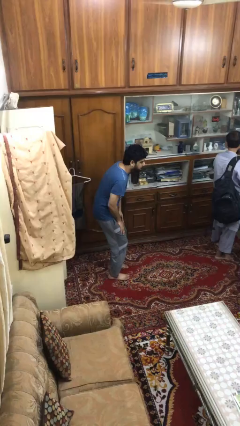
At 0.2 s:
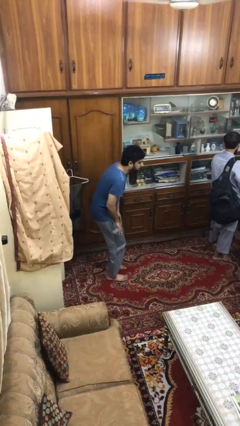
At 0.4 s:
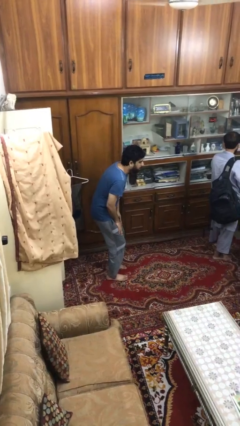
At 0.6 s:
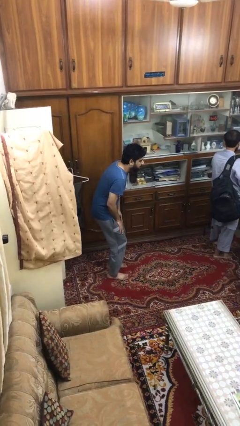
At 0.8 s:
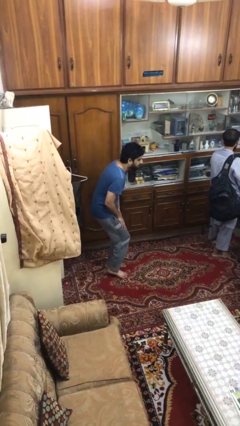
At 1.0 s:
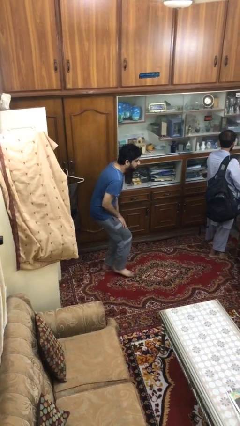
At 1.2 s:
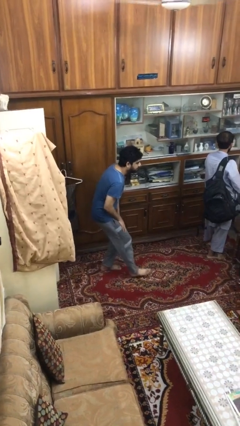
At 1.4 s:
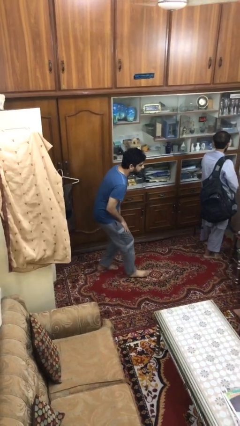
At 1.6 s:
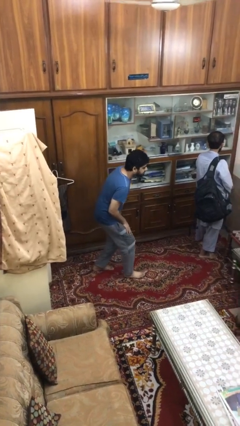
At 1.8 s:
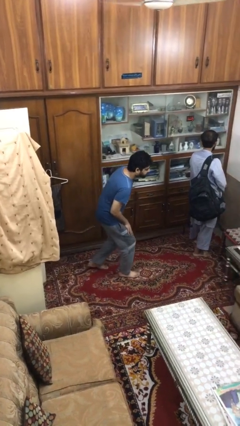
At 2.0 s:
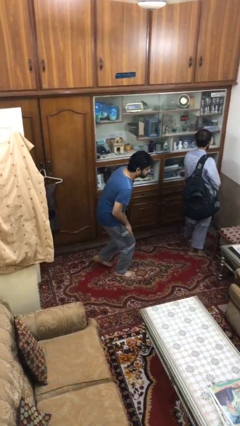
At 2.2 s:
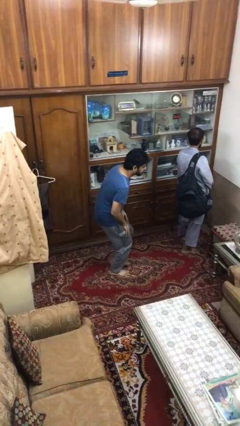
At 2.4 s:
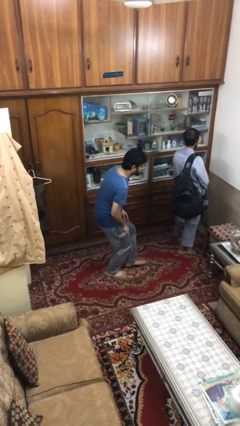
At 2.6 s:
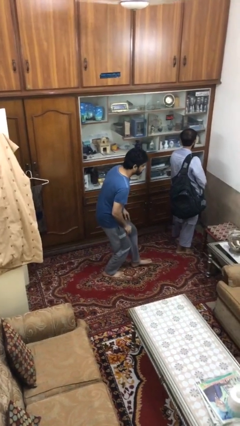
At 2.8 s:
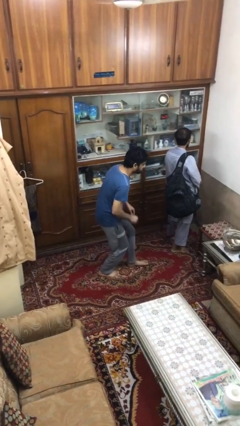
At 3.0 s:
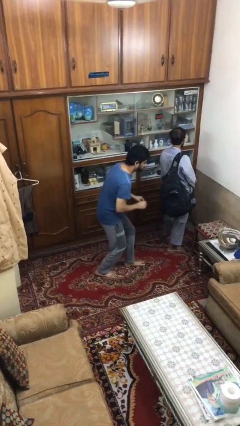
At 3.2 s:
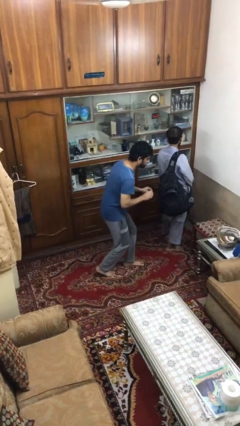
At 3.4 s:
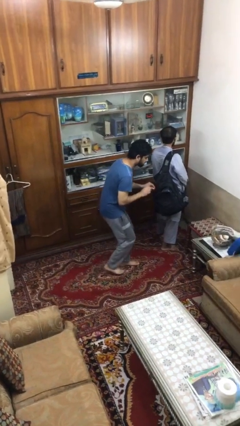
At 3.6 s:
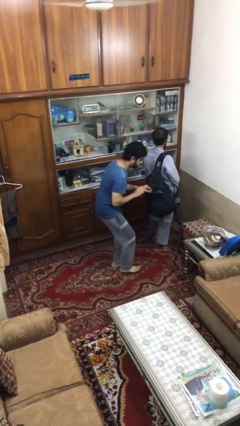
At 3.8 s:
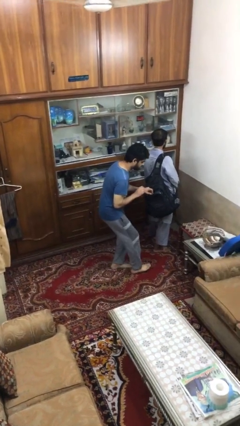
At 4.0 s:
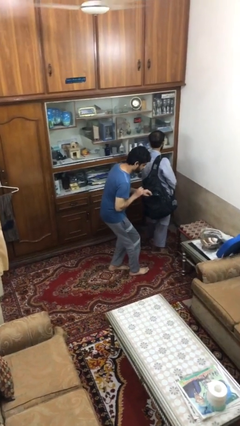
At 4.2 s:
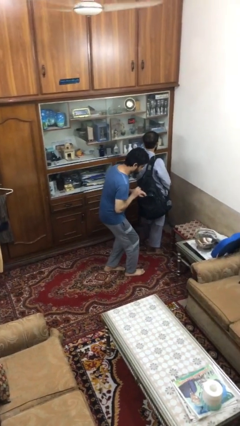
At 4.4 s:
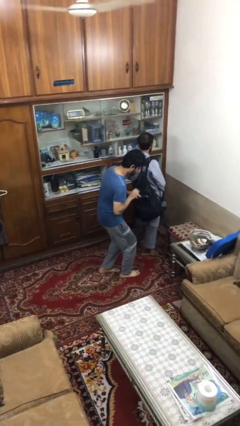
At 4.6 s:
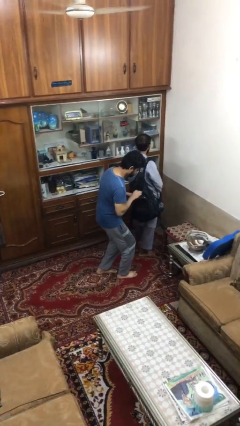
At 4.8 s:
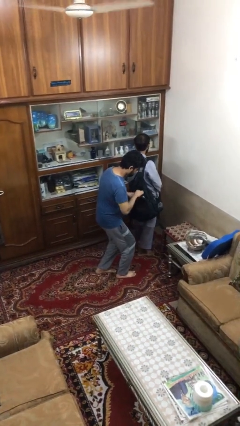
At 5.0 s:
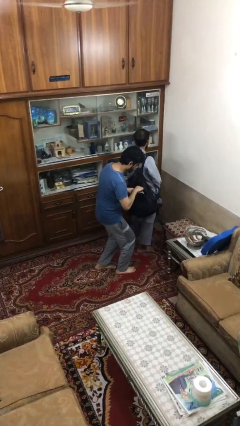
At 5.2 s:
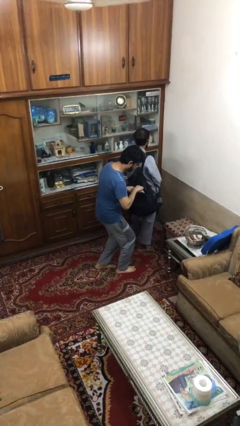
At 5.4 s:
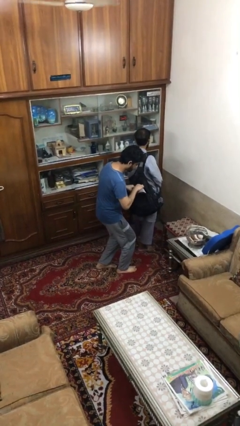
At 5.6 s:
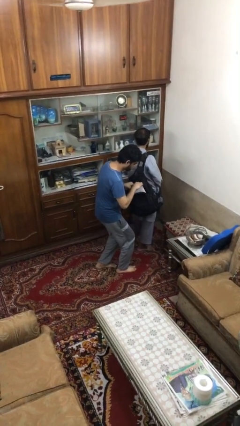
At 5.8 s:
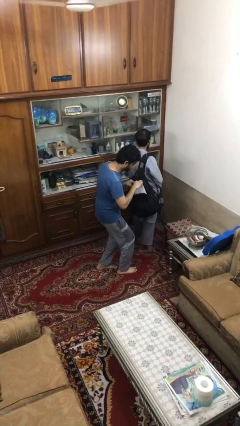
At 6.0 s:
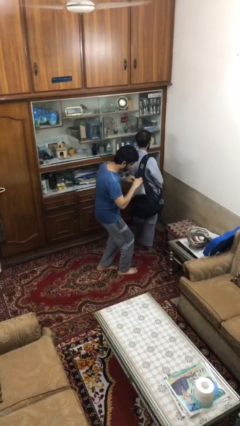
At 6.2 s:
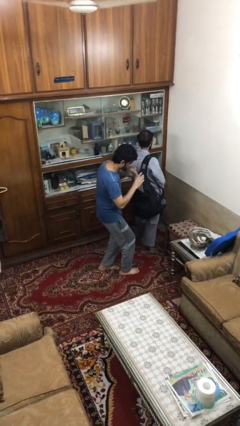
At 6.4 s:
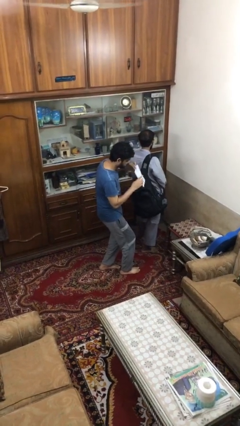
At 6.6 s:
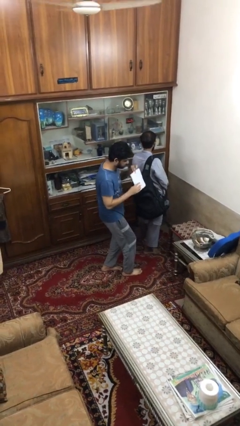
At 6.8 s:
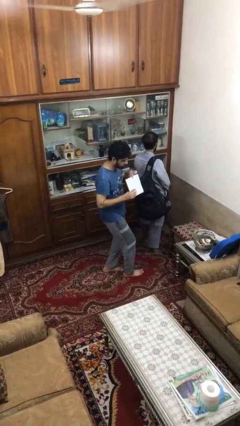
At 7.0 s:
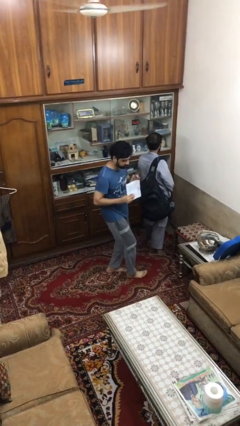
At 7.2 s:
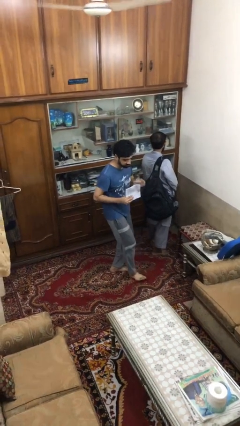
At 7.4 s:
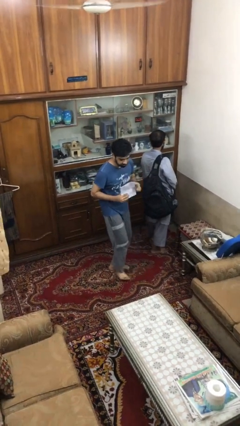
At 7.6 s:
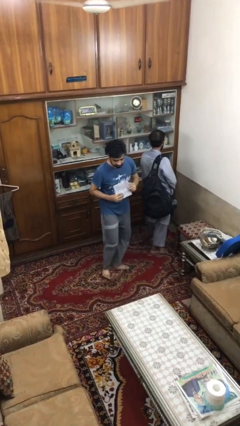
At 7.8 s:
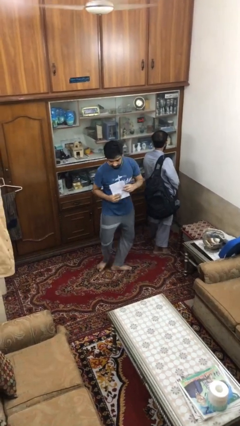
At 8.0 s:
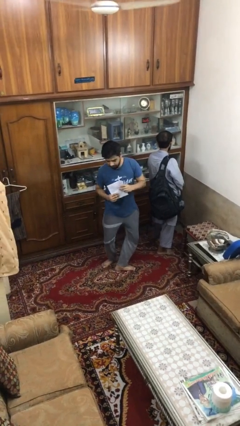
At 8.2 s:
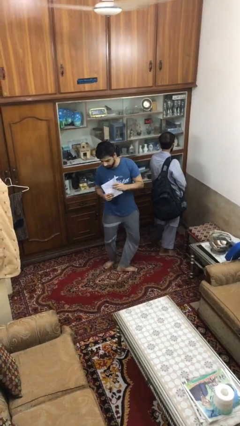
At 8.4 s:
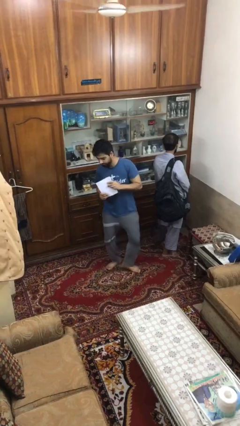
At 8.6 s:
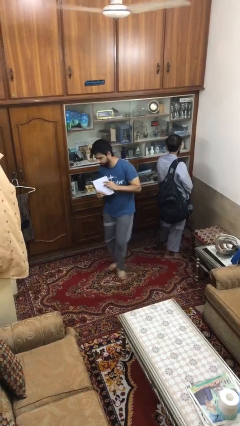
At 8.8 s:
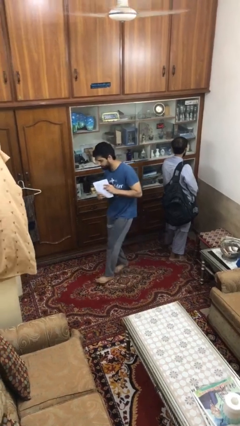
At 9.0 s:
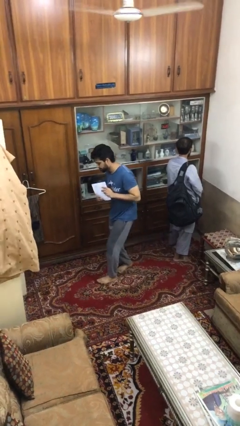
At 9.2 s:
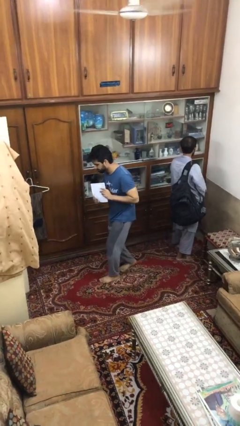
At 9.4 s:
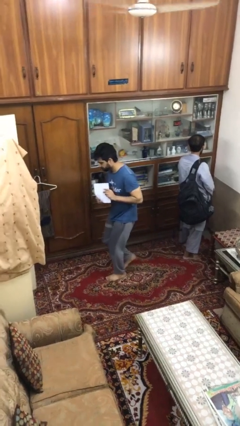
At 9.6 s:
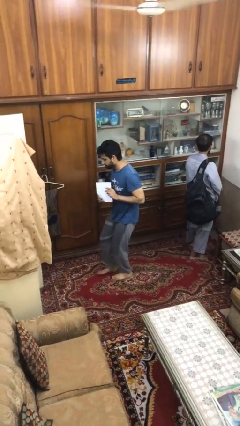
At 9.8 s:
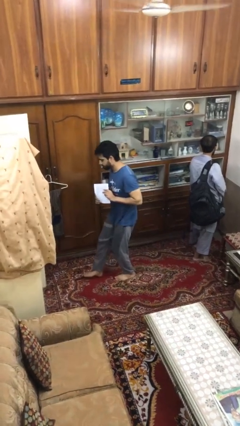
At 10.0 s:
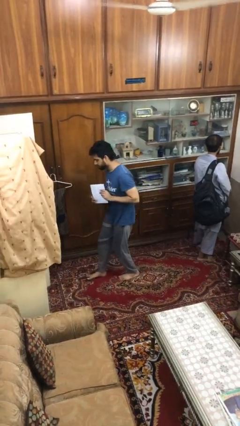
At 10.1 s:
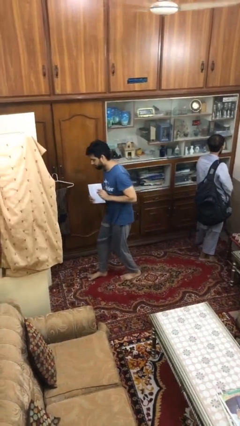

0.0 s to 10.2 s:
person steals object from person

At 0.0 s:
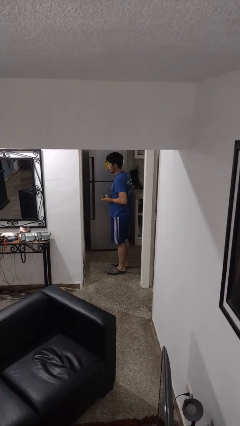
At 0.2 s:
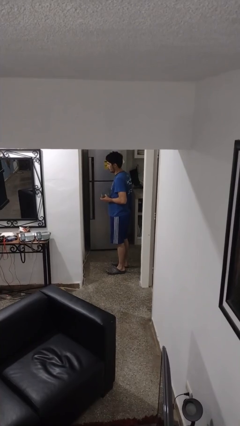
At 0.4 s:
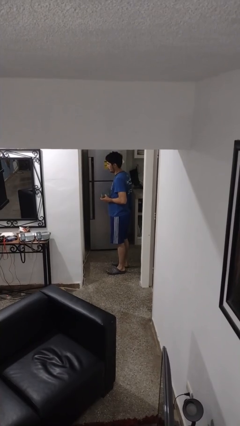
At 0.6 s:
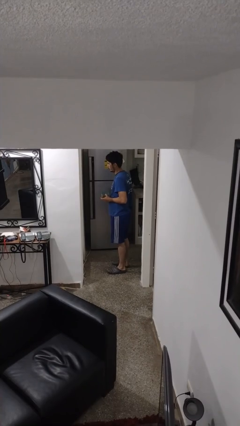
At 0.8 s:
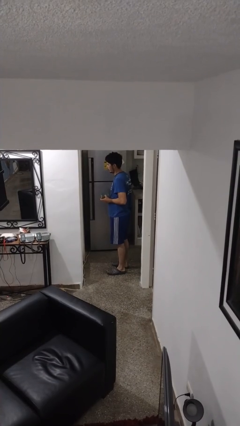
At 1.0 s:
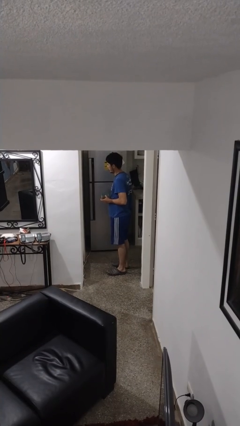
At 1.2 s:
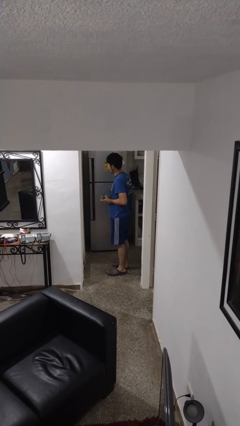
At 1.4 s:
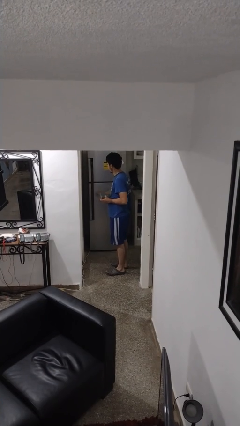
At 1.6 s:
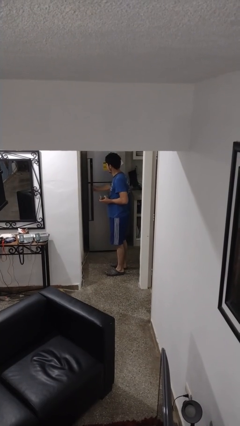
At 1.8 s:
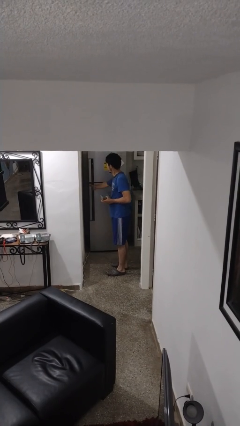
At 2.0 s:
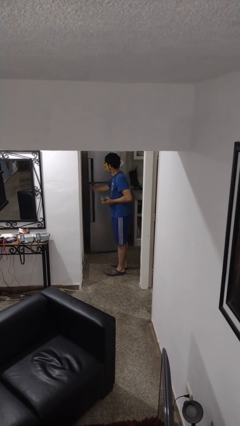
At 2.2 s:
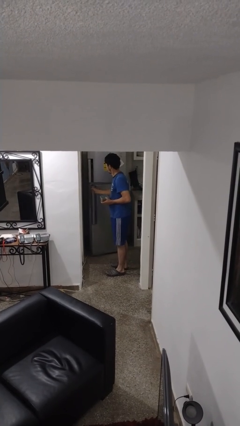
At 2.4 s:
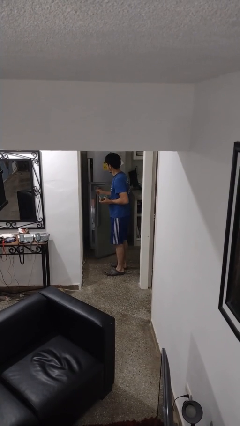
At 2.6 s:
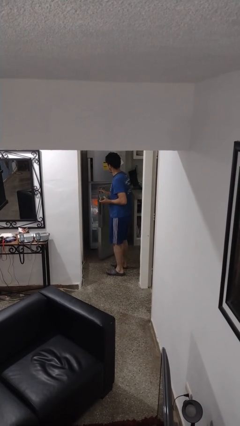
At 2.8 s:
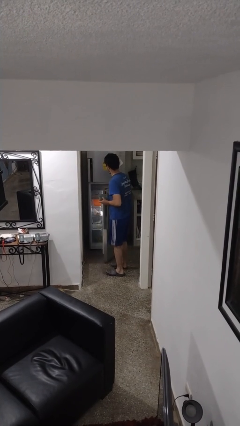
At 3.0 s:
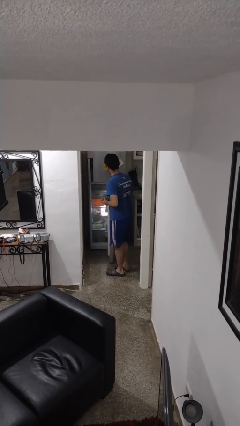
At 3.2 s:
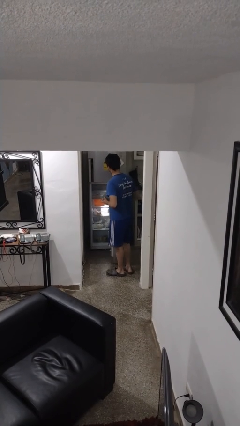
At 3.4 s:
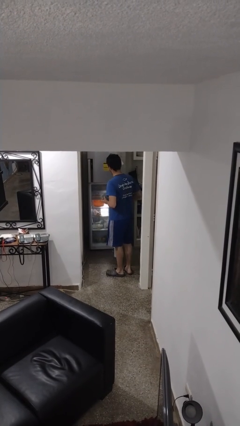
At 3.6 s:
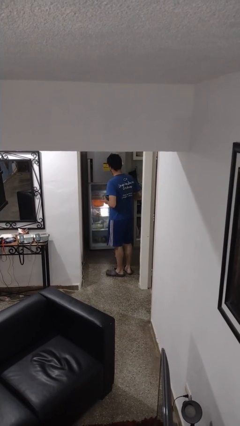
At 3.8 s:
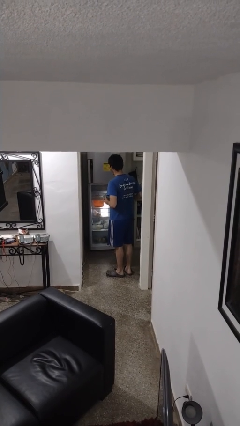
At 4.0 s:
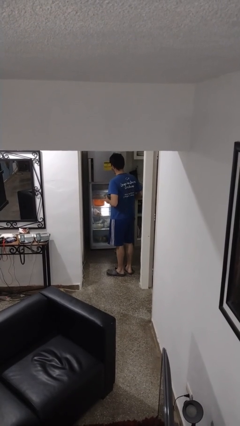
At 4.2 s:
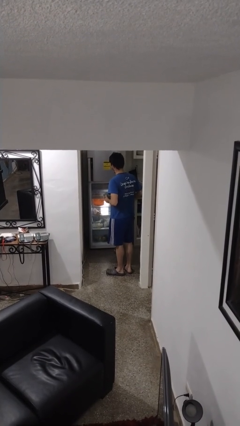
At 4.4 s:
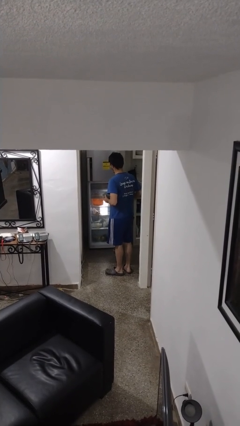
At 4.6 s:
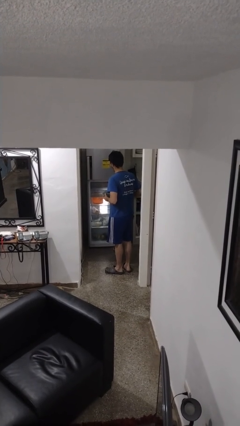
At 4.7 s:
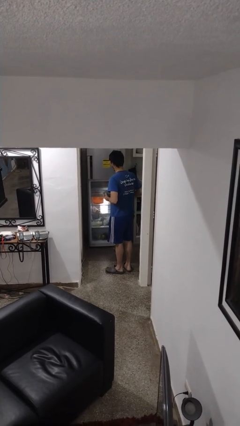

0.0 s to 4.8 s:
person opens refrigerator

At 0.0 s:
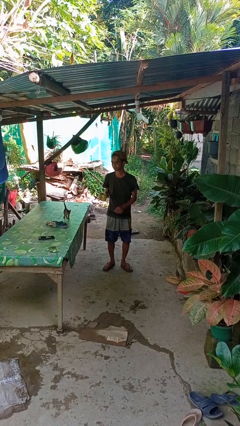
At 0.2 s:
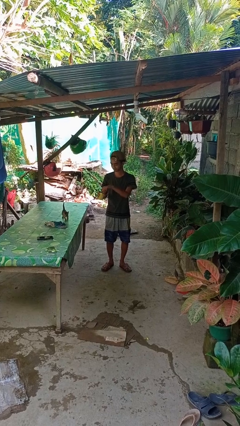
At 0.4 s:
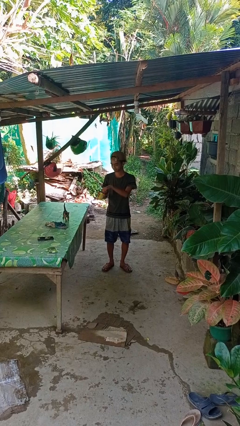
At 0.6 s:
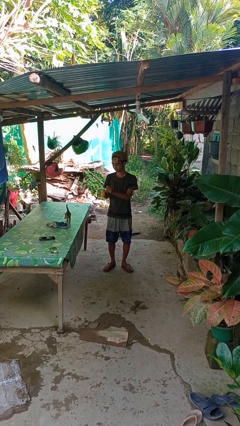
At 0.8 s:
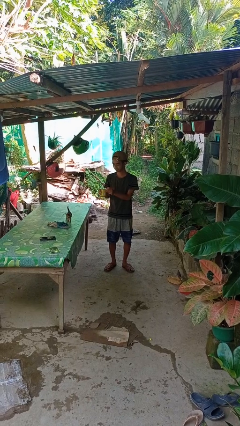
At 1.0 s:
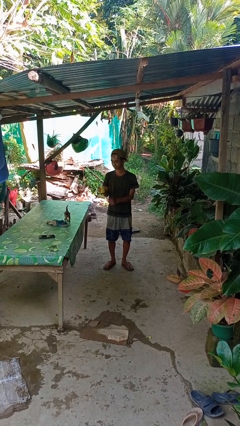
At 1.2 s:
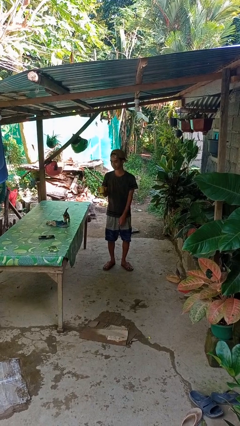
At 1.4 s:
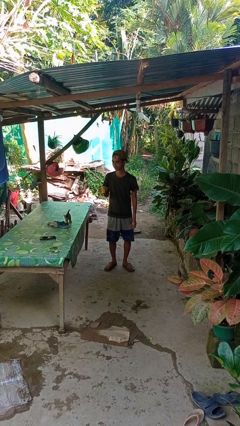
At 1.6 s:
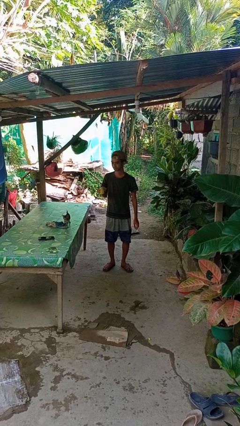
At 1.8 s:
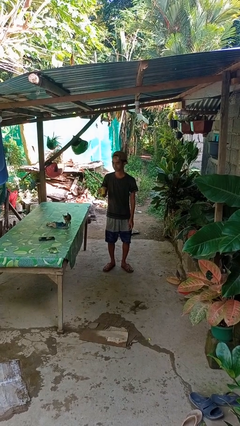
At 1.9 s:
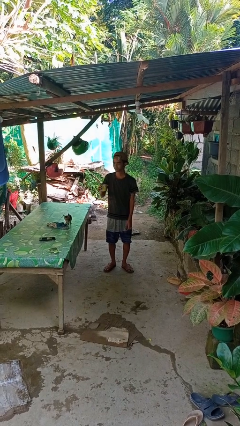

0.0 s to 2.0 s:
person opens beverage can

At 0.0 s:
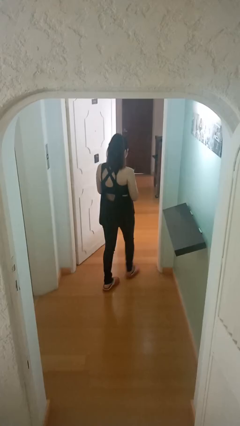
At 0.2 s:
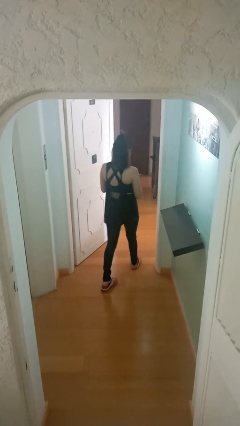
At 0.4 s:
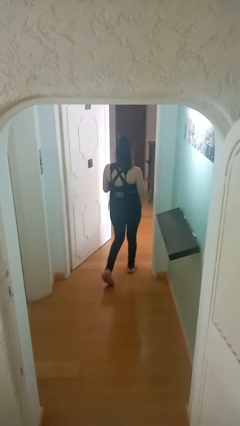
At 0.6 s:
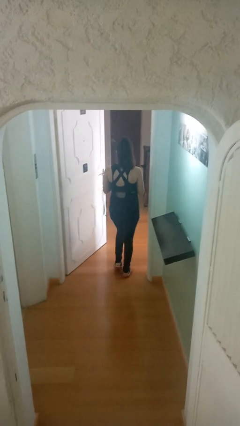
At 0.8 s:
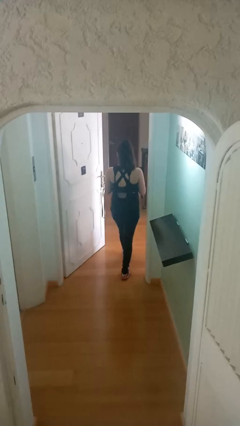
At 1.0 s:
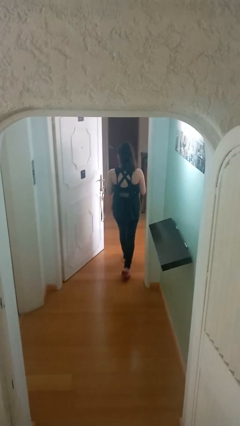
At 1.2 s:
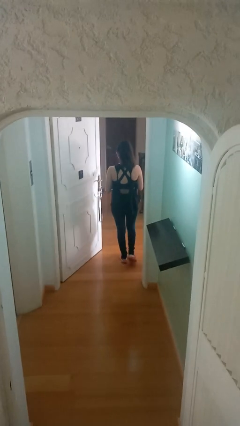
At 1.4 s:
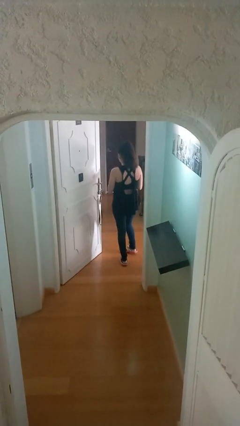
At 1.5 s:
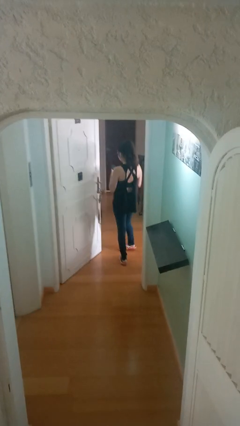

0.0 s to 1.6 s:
person exits scene through structure
